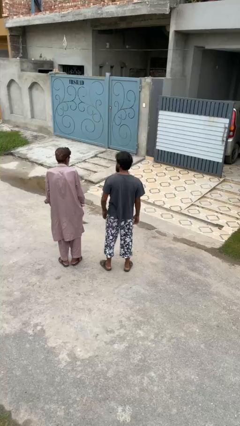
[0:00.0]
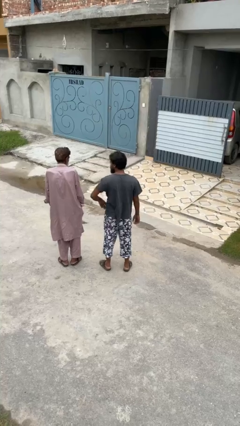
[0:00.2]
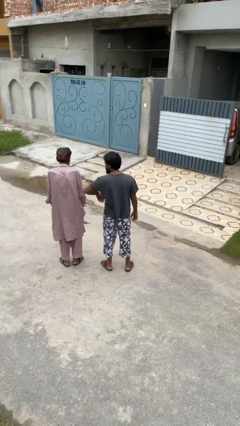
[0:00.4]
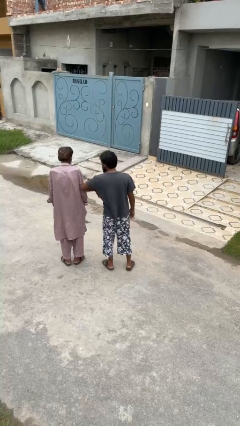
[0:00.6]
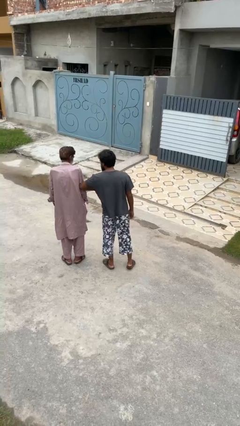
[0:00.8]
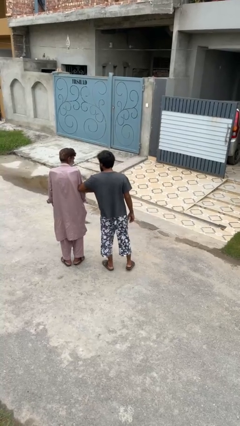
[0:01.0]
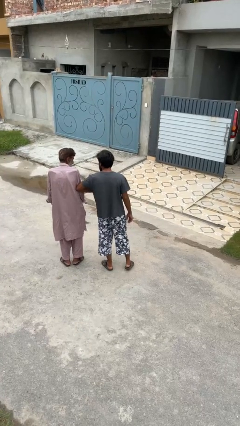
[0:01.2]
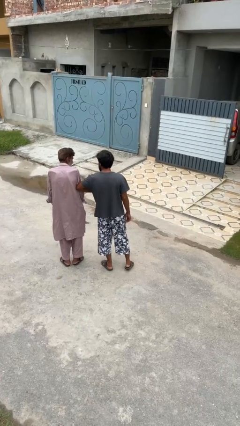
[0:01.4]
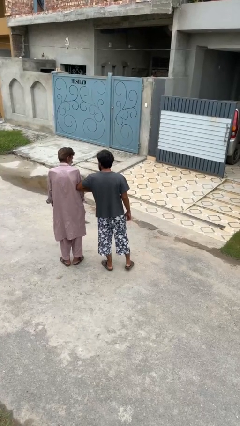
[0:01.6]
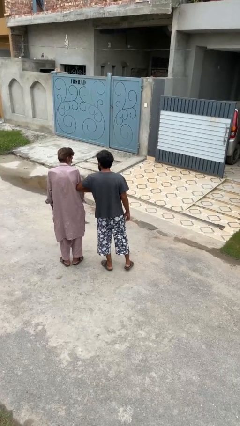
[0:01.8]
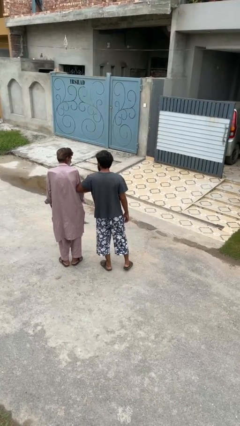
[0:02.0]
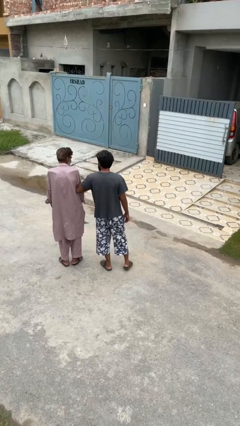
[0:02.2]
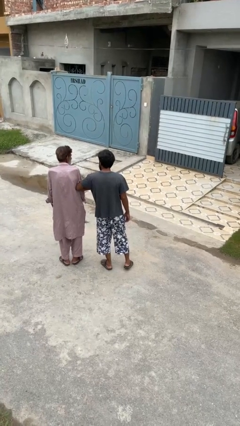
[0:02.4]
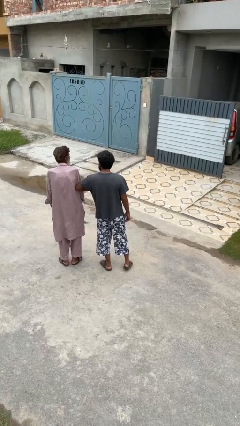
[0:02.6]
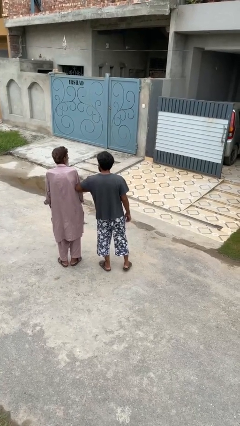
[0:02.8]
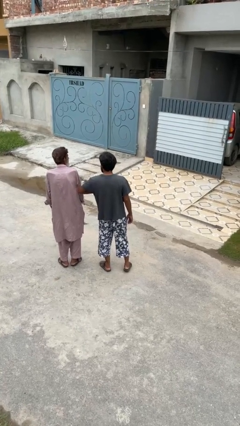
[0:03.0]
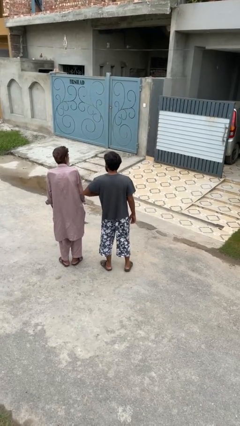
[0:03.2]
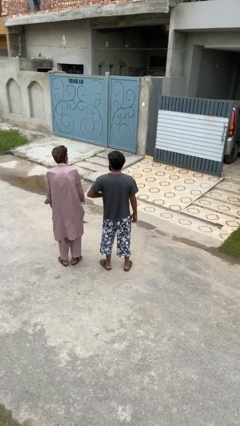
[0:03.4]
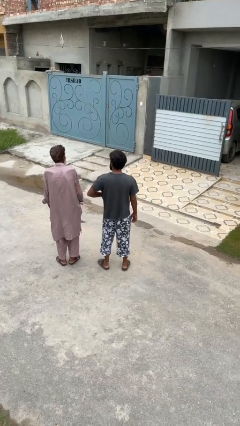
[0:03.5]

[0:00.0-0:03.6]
person nudges person with elbow

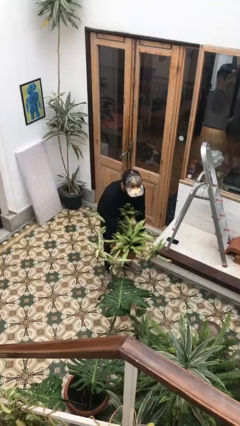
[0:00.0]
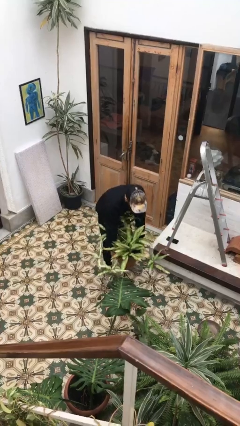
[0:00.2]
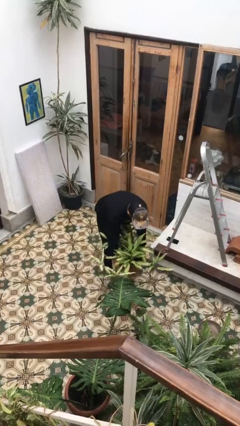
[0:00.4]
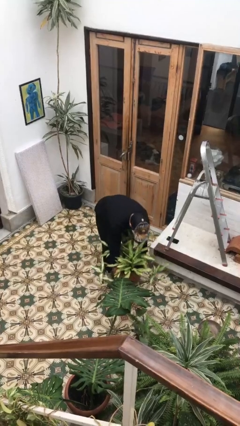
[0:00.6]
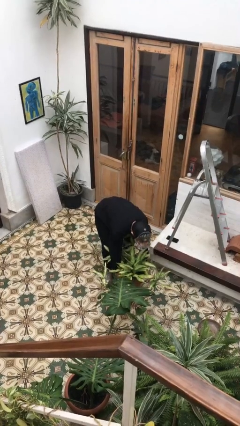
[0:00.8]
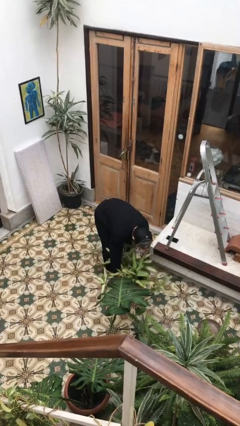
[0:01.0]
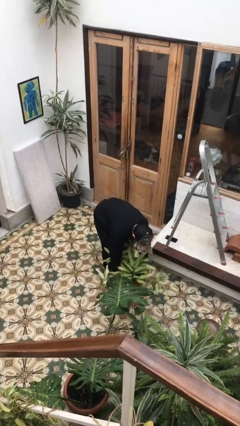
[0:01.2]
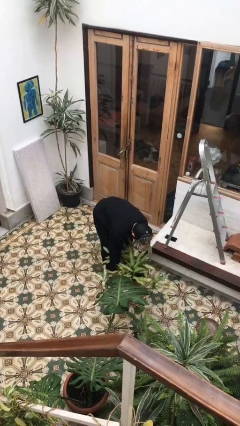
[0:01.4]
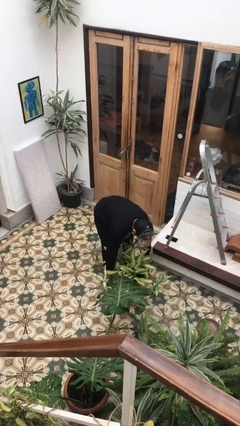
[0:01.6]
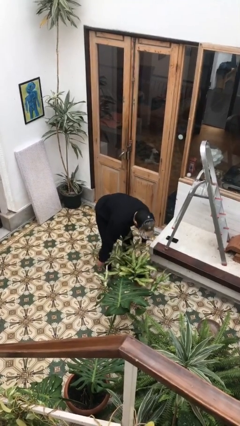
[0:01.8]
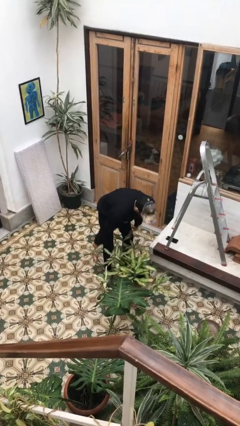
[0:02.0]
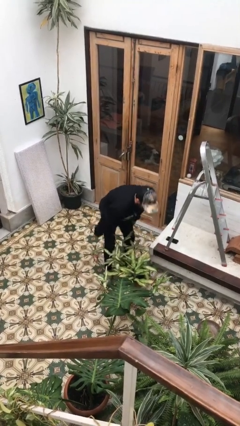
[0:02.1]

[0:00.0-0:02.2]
person puts down object on floor

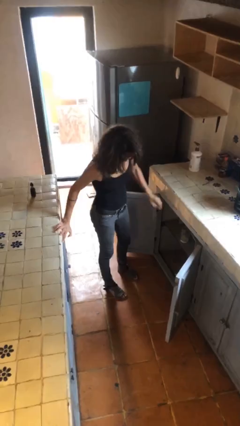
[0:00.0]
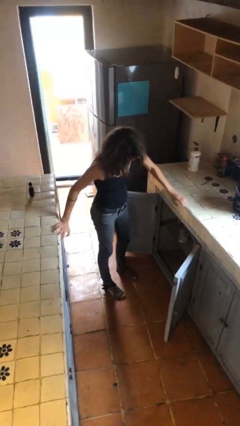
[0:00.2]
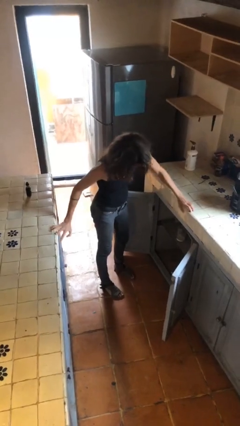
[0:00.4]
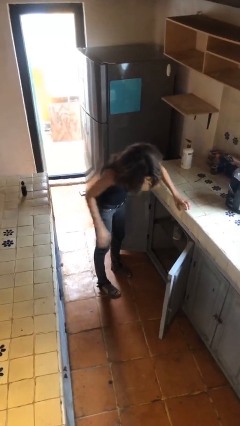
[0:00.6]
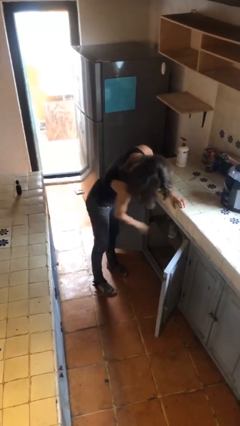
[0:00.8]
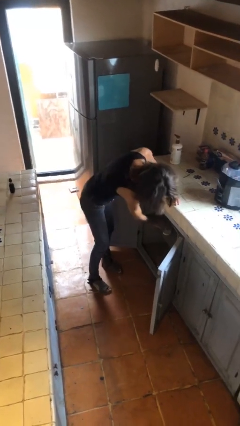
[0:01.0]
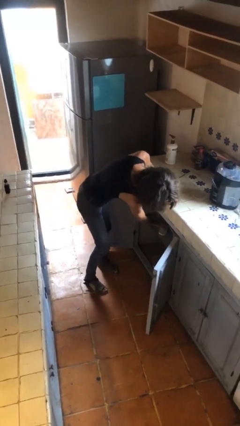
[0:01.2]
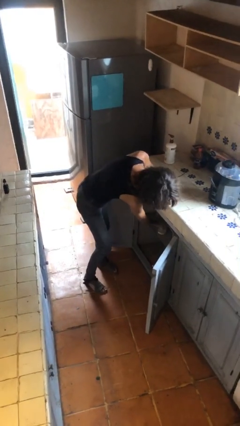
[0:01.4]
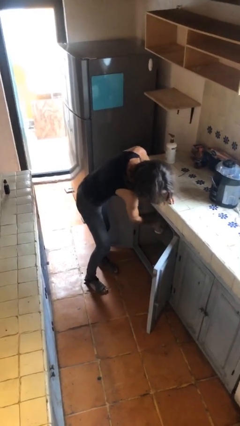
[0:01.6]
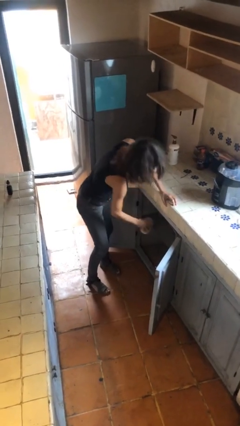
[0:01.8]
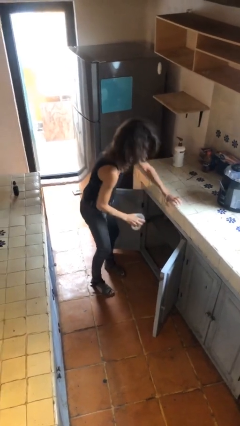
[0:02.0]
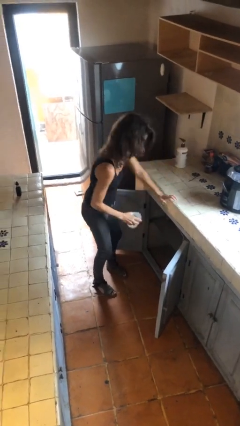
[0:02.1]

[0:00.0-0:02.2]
person picks up object from cabinet

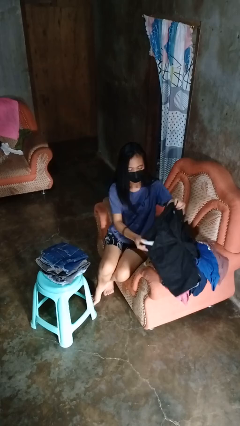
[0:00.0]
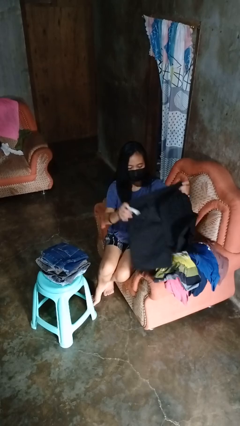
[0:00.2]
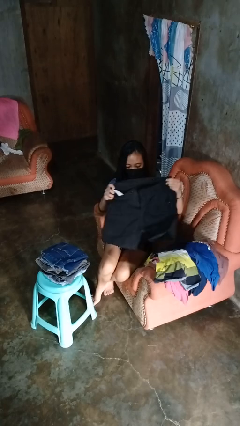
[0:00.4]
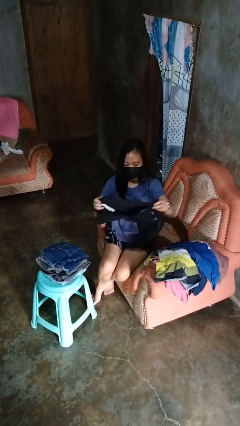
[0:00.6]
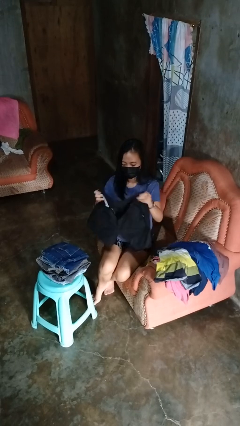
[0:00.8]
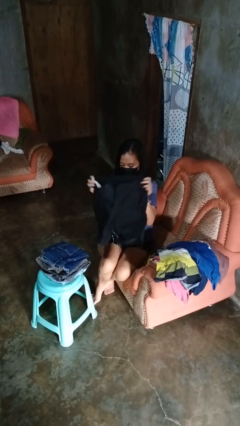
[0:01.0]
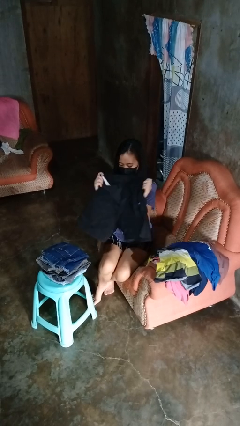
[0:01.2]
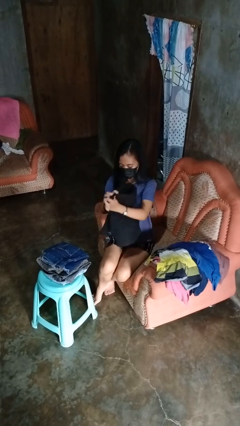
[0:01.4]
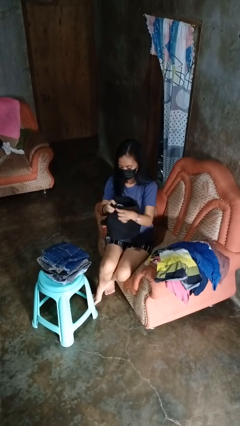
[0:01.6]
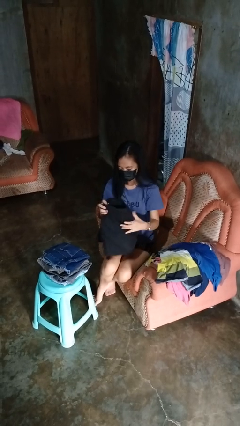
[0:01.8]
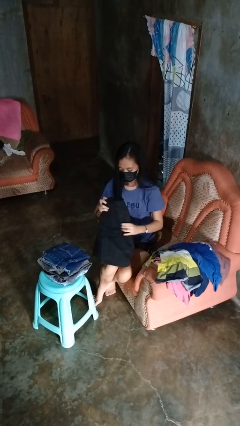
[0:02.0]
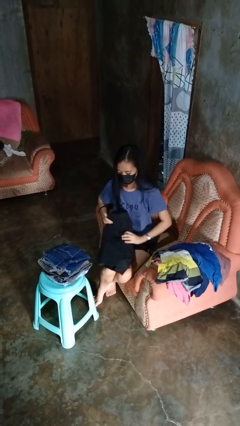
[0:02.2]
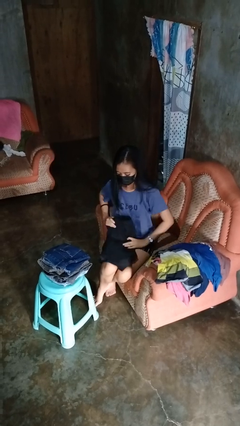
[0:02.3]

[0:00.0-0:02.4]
person folds pants

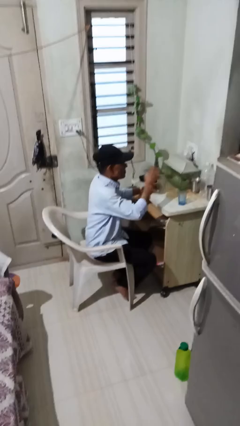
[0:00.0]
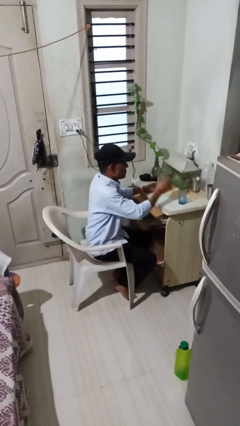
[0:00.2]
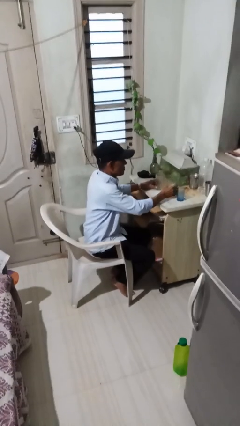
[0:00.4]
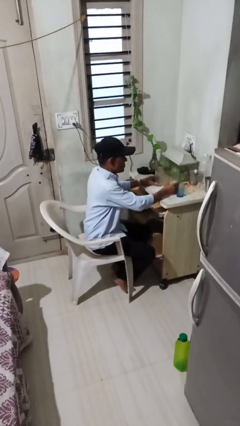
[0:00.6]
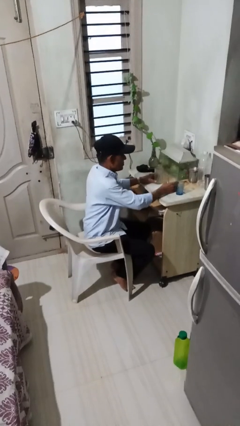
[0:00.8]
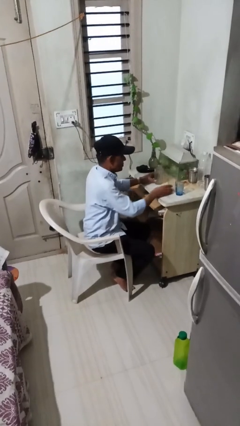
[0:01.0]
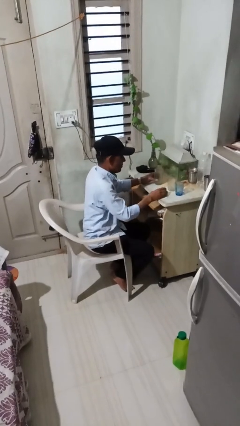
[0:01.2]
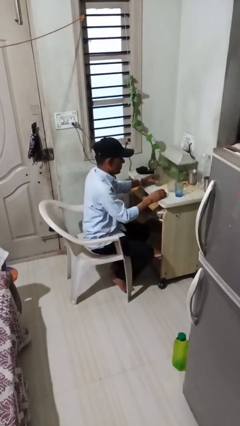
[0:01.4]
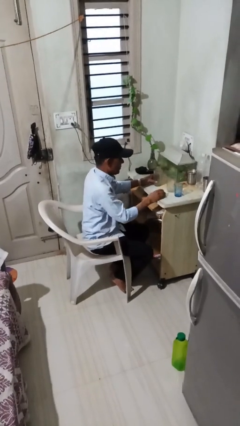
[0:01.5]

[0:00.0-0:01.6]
person puts down object on table

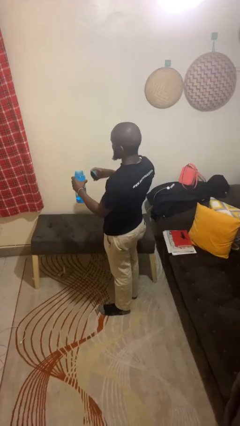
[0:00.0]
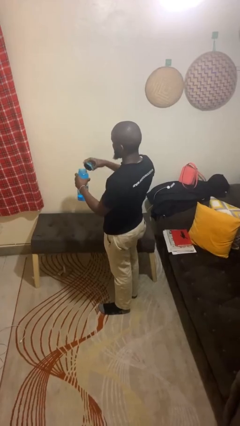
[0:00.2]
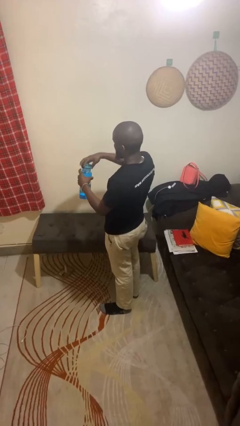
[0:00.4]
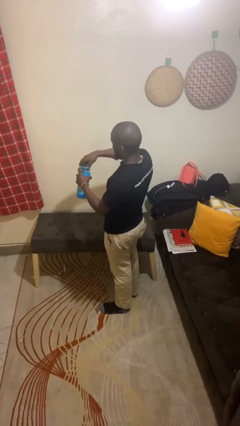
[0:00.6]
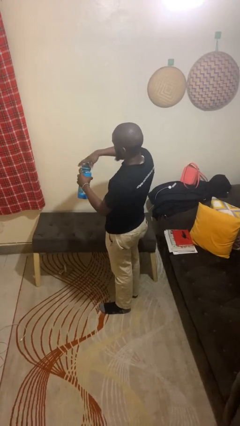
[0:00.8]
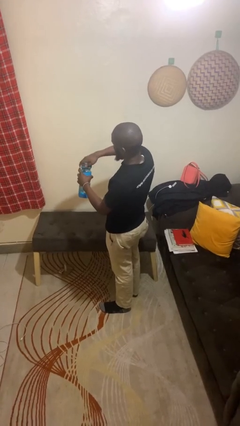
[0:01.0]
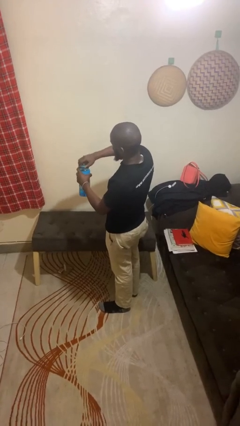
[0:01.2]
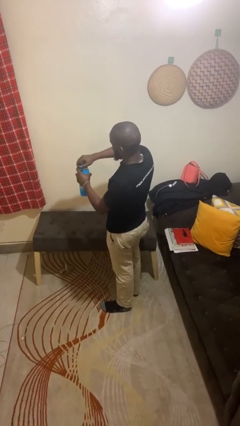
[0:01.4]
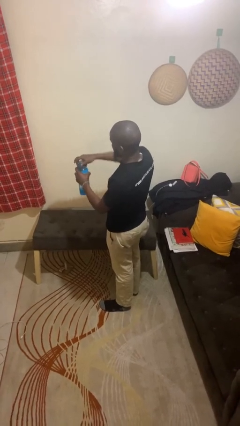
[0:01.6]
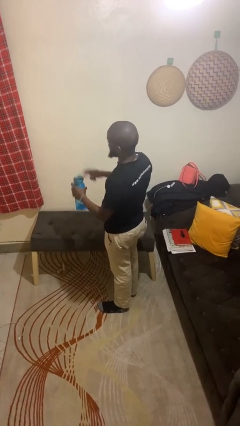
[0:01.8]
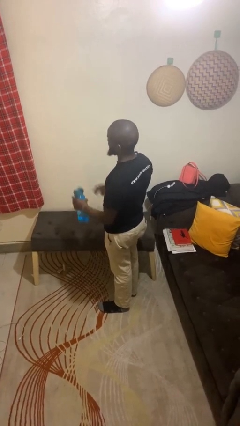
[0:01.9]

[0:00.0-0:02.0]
person closes jar

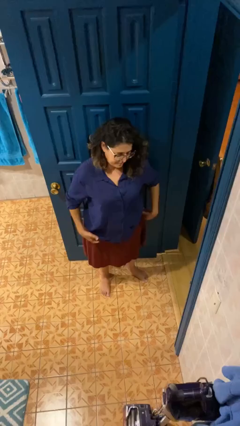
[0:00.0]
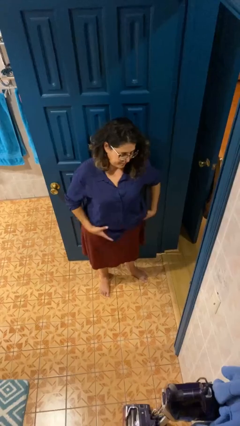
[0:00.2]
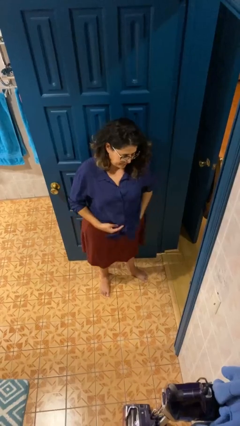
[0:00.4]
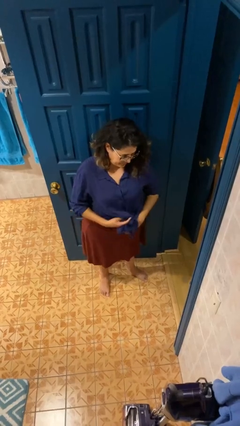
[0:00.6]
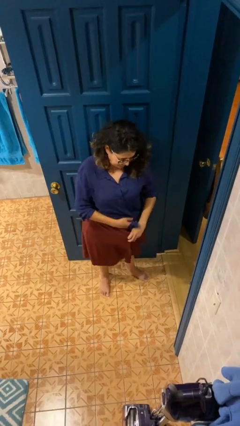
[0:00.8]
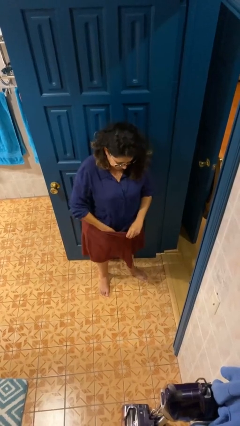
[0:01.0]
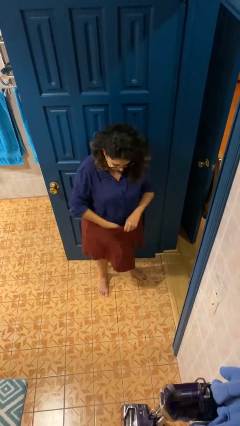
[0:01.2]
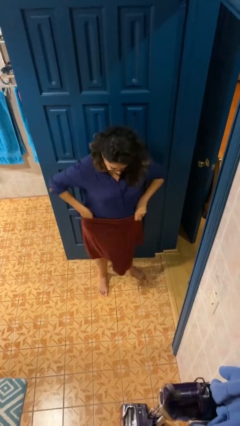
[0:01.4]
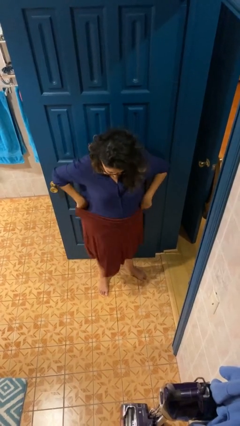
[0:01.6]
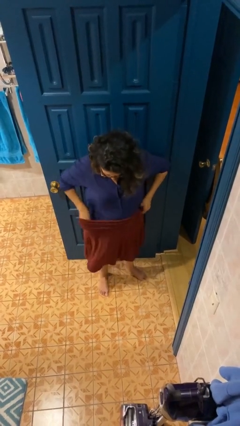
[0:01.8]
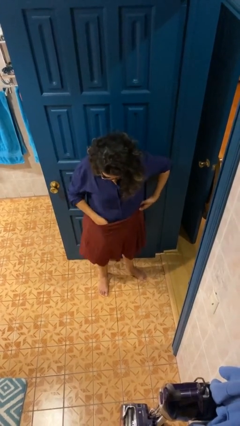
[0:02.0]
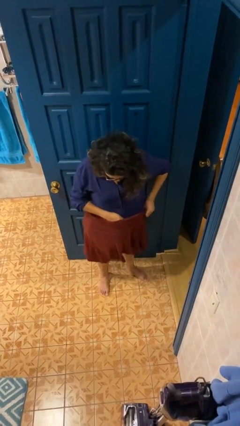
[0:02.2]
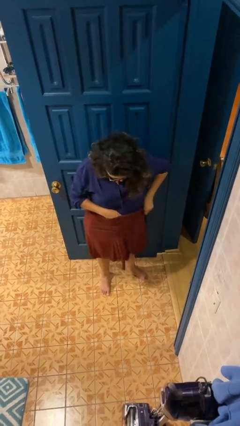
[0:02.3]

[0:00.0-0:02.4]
person tucks in shirt

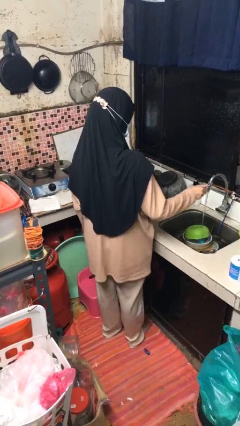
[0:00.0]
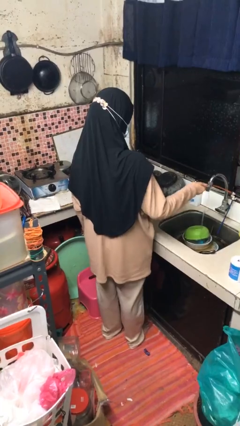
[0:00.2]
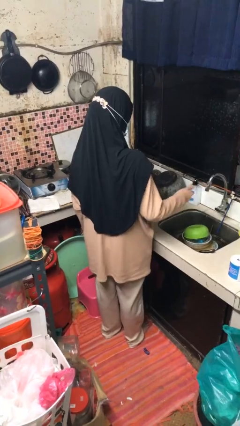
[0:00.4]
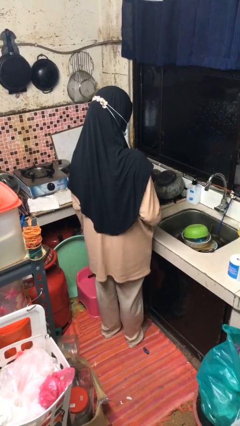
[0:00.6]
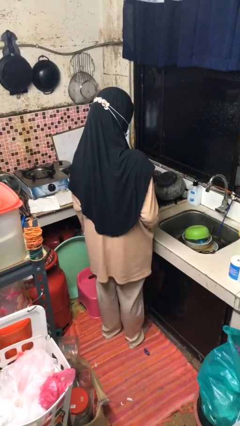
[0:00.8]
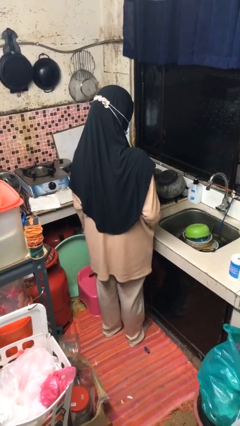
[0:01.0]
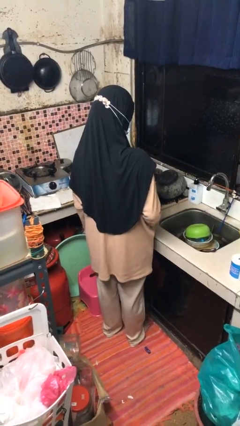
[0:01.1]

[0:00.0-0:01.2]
person turns off faucet
